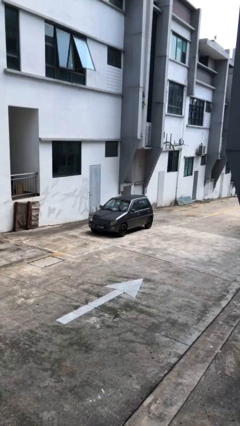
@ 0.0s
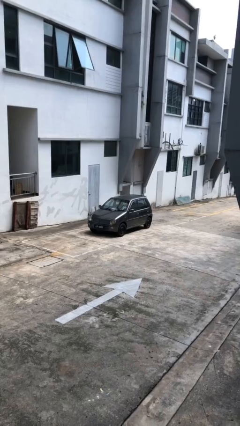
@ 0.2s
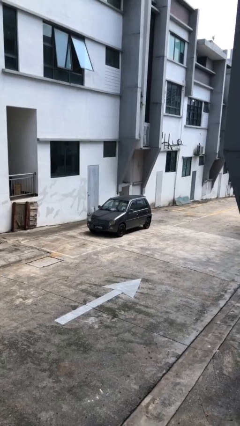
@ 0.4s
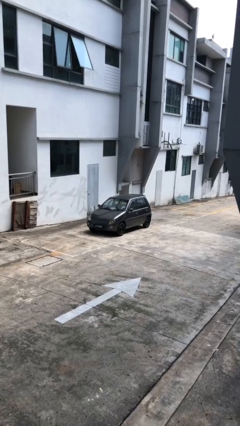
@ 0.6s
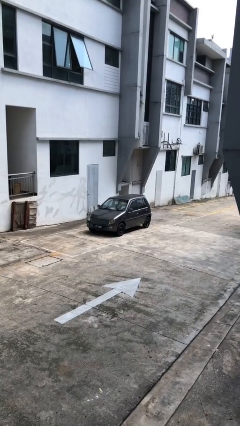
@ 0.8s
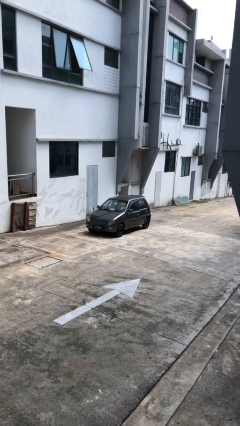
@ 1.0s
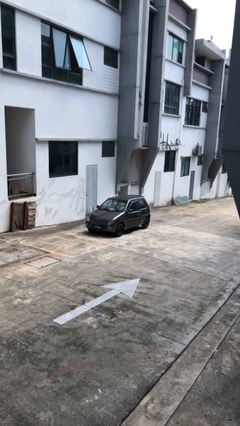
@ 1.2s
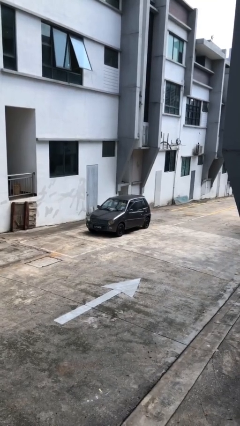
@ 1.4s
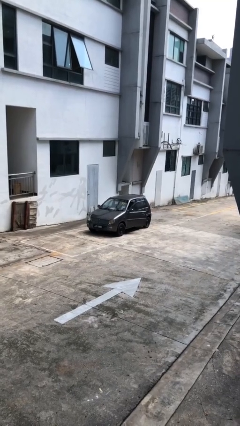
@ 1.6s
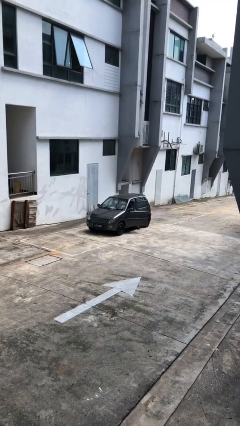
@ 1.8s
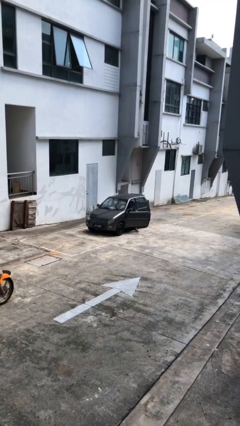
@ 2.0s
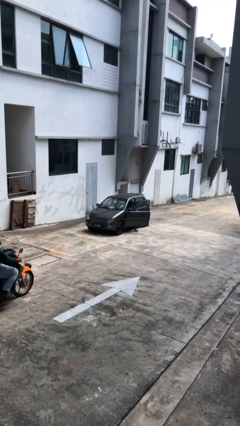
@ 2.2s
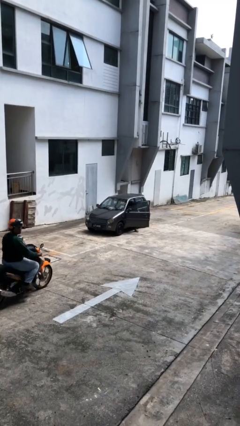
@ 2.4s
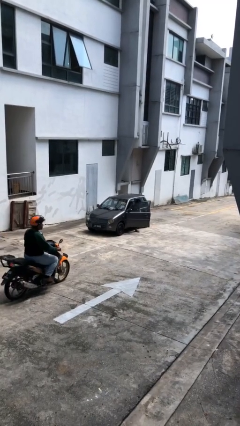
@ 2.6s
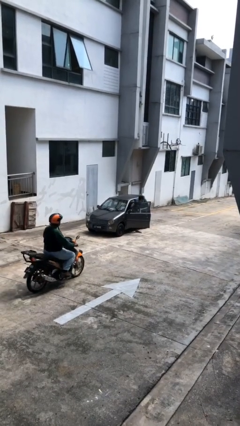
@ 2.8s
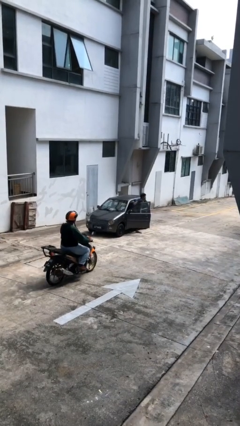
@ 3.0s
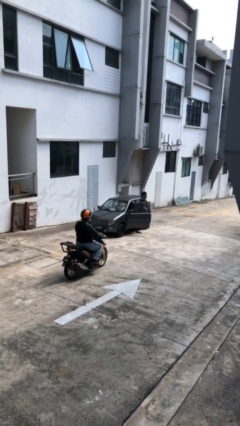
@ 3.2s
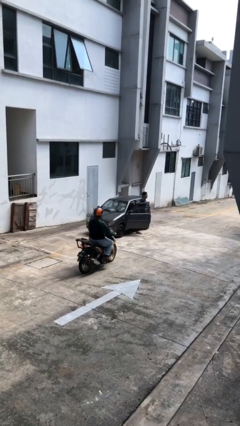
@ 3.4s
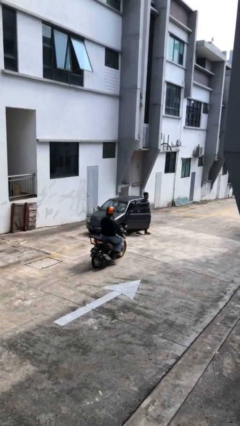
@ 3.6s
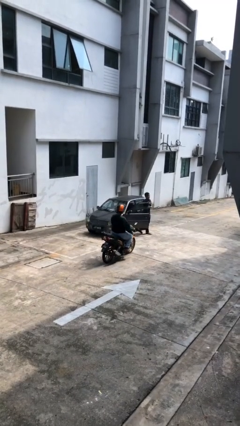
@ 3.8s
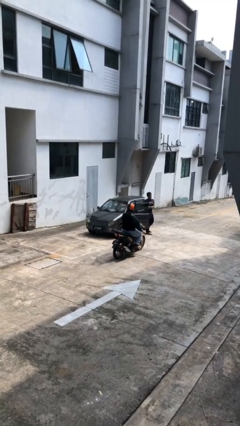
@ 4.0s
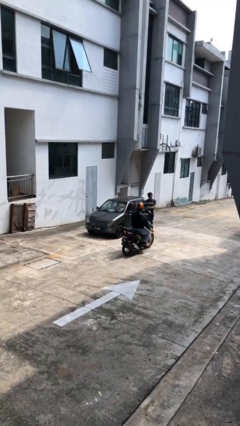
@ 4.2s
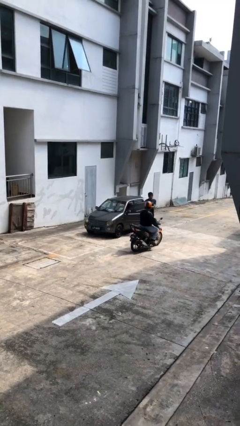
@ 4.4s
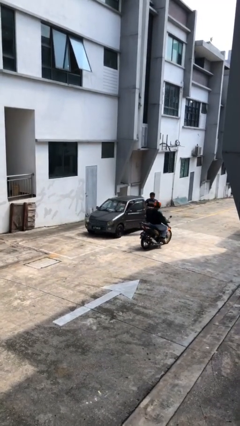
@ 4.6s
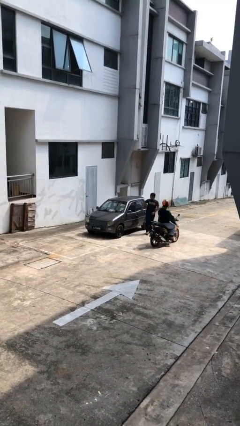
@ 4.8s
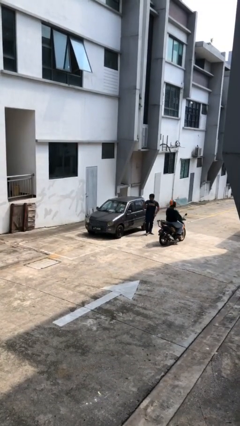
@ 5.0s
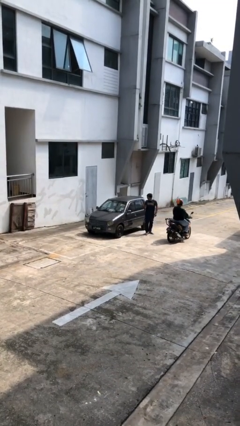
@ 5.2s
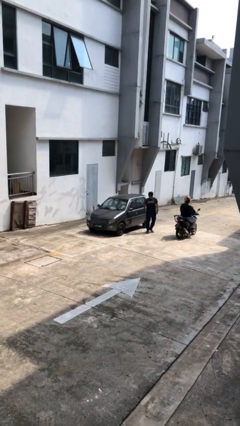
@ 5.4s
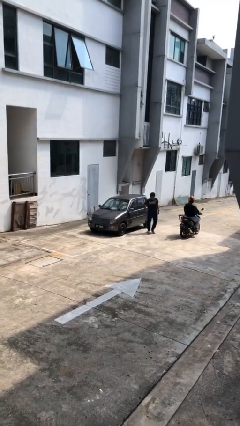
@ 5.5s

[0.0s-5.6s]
car drops off person

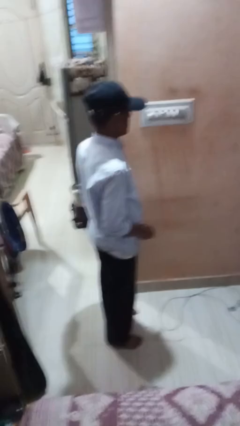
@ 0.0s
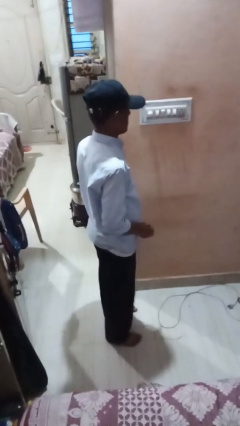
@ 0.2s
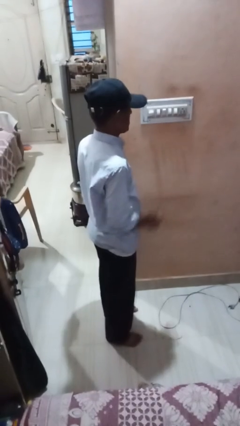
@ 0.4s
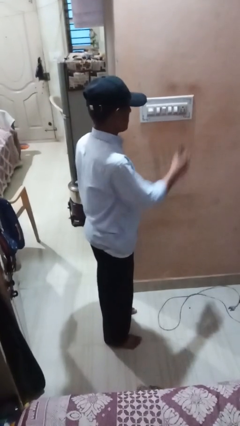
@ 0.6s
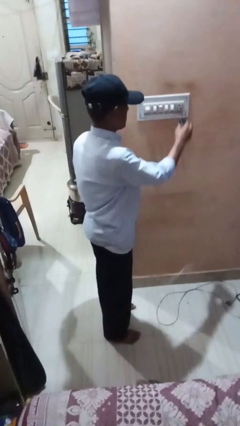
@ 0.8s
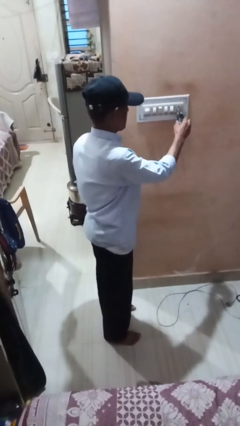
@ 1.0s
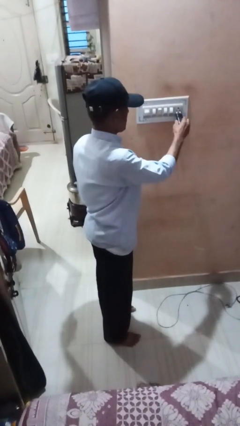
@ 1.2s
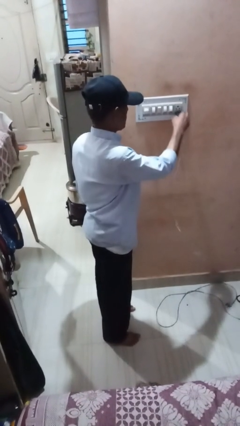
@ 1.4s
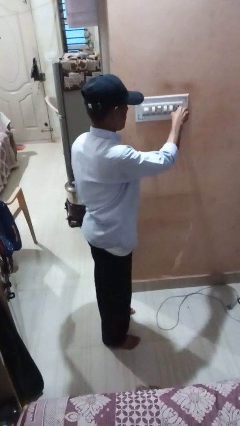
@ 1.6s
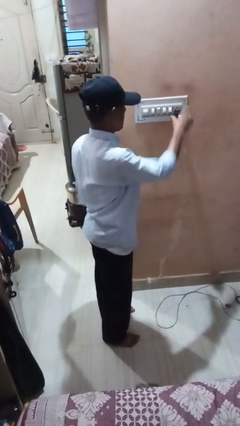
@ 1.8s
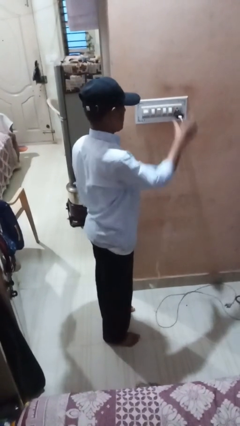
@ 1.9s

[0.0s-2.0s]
person plugs into electrical socket

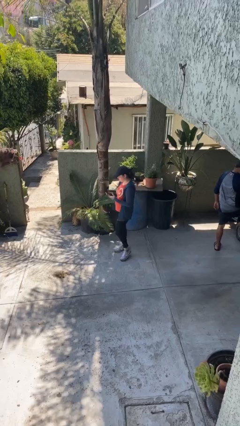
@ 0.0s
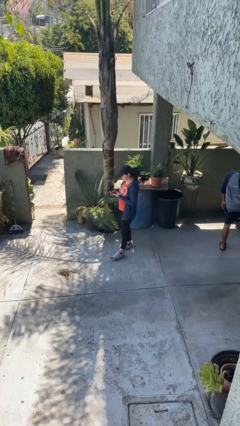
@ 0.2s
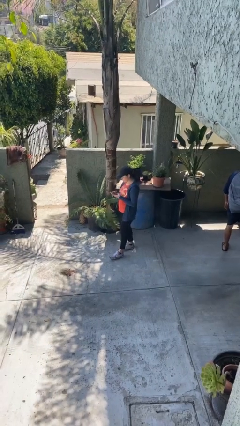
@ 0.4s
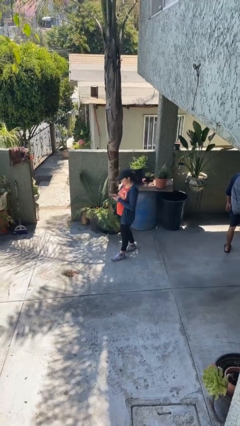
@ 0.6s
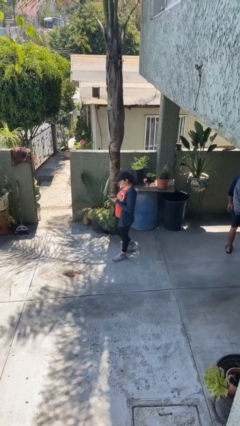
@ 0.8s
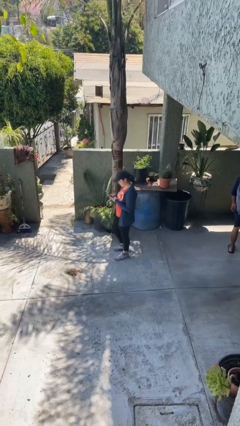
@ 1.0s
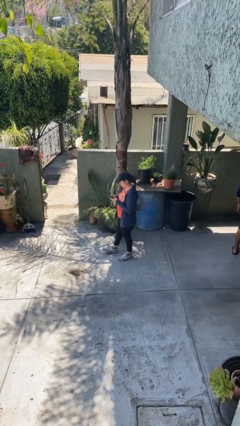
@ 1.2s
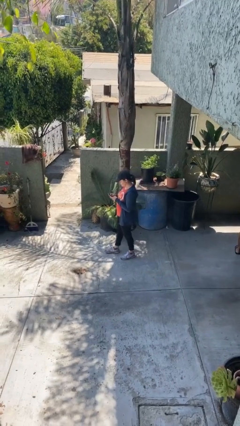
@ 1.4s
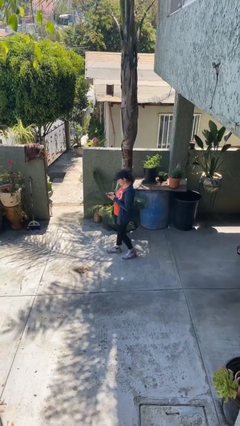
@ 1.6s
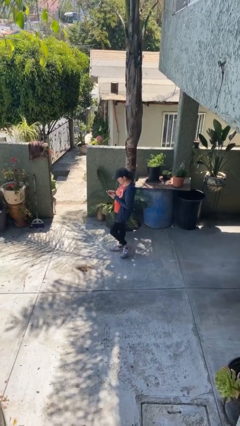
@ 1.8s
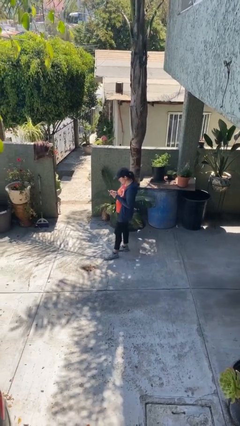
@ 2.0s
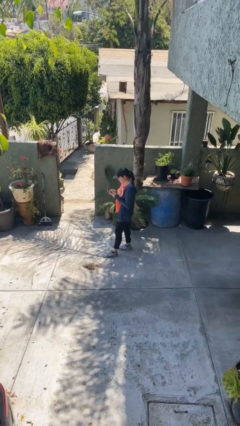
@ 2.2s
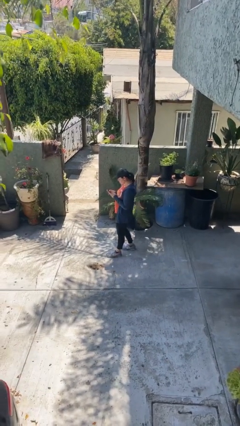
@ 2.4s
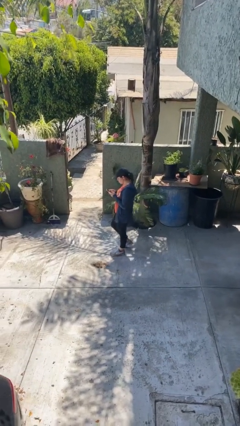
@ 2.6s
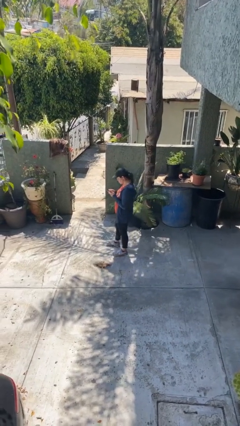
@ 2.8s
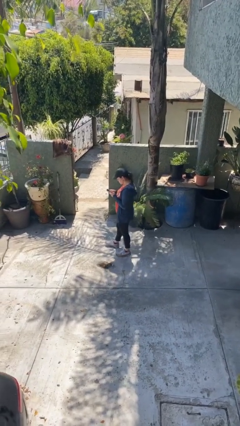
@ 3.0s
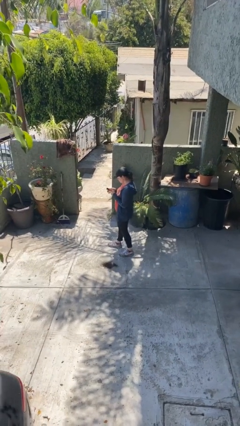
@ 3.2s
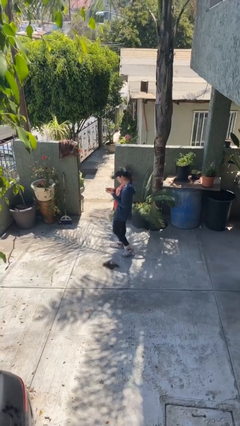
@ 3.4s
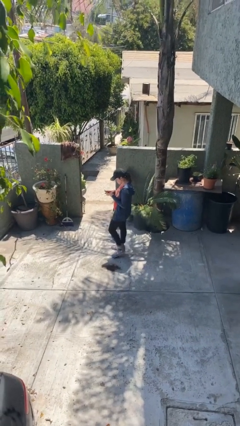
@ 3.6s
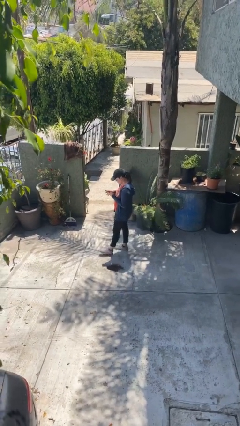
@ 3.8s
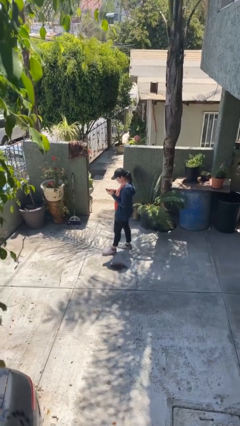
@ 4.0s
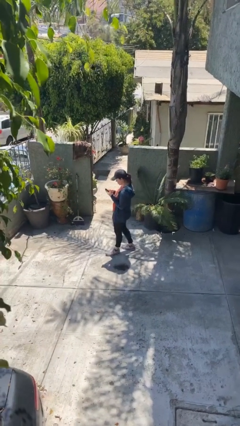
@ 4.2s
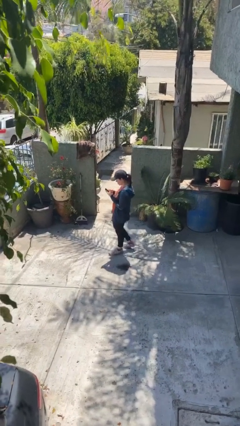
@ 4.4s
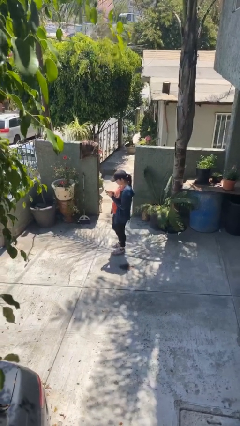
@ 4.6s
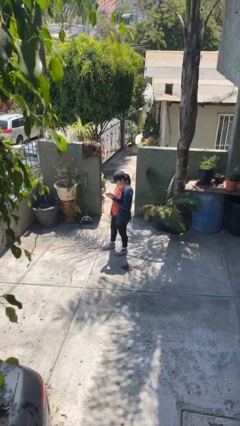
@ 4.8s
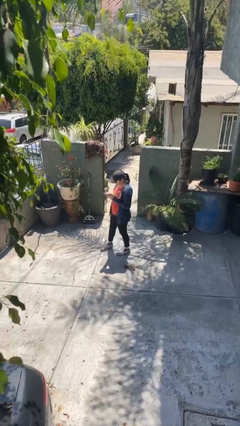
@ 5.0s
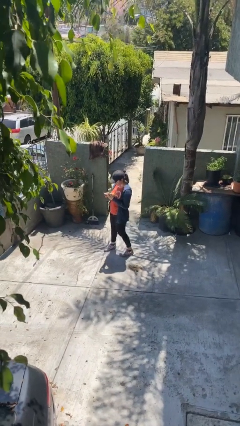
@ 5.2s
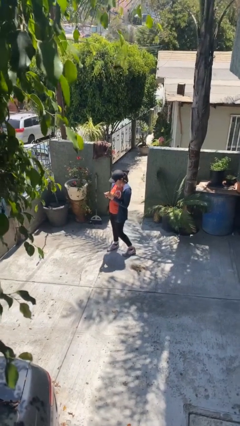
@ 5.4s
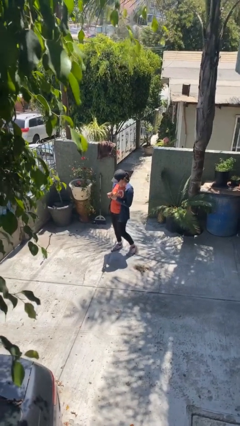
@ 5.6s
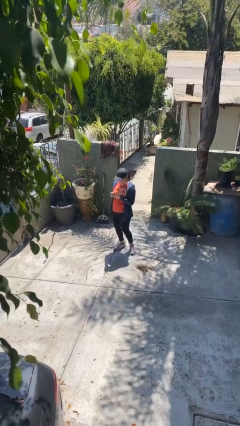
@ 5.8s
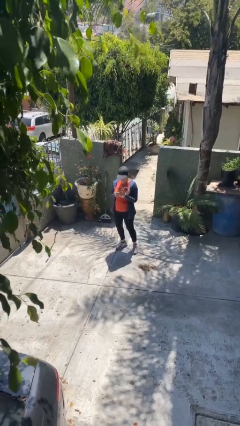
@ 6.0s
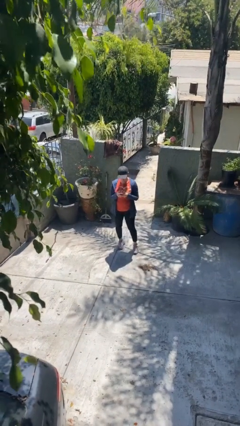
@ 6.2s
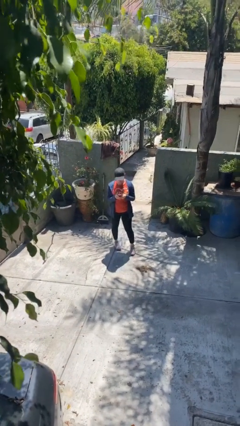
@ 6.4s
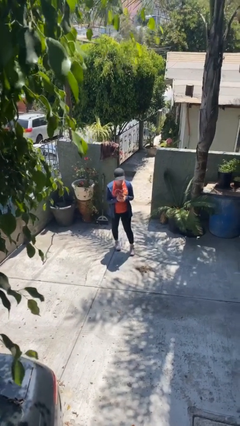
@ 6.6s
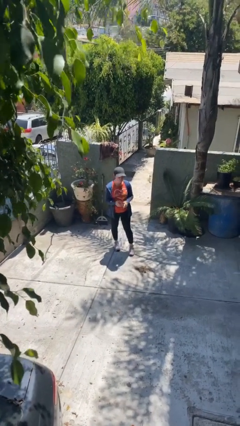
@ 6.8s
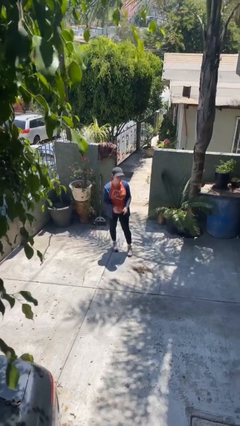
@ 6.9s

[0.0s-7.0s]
person texts on phone

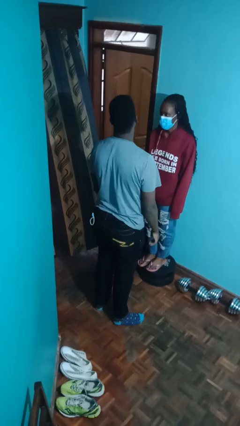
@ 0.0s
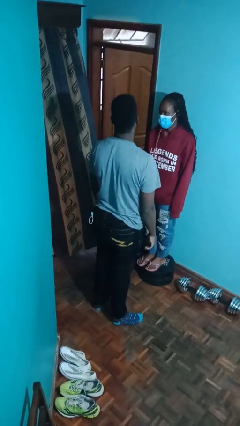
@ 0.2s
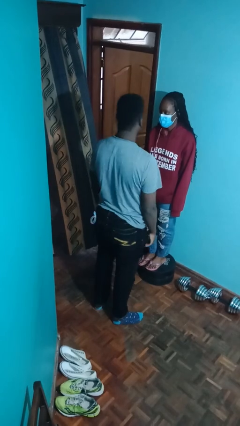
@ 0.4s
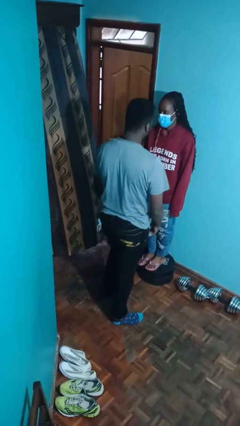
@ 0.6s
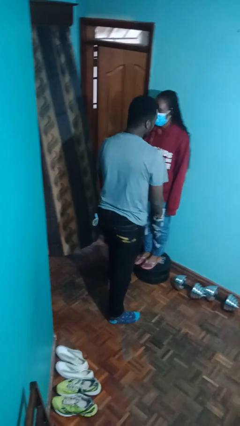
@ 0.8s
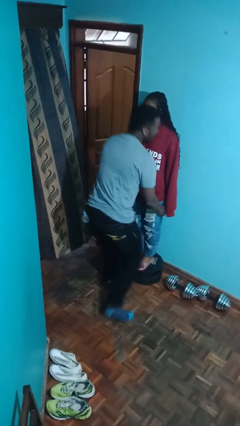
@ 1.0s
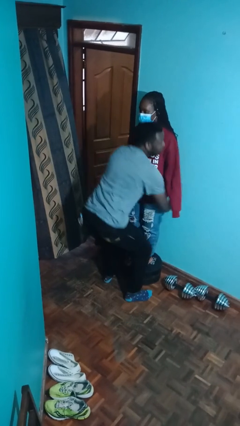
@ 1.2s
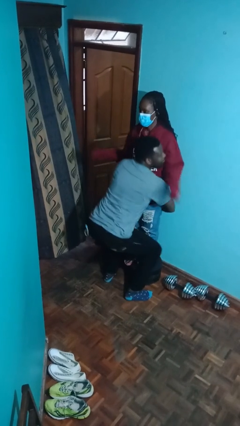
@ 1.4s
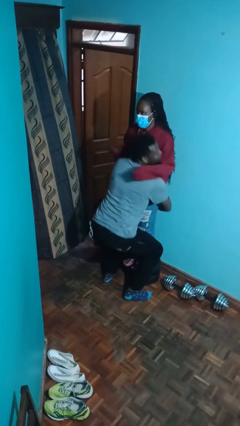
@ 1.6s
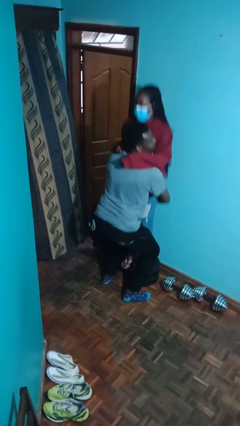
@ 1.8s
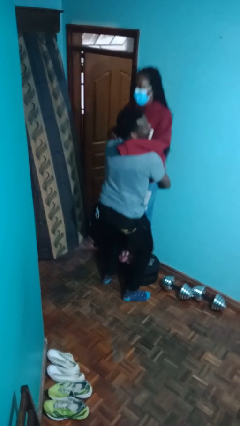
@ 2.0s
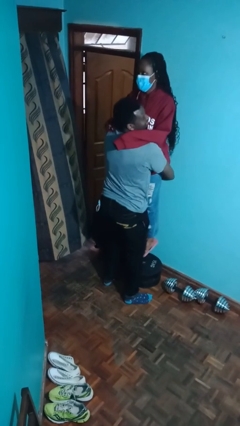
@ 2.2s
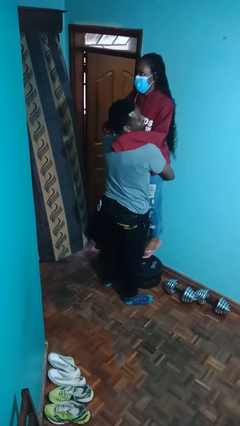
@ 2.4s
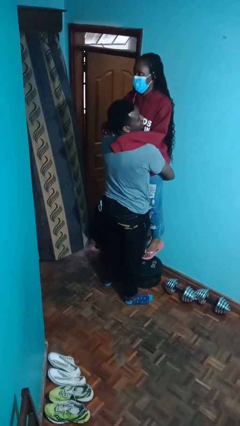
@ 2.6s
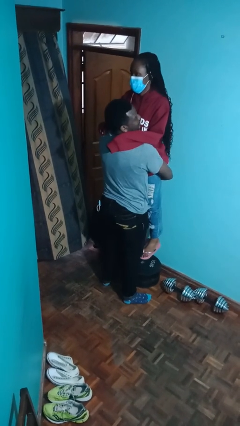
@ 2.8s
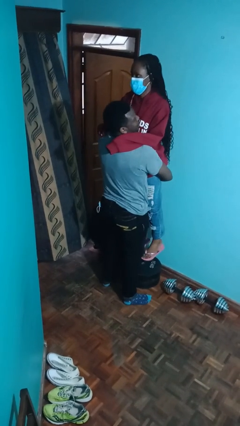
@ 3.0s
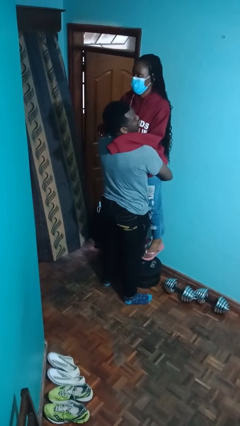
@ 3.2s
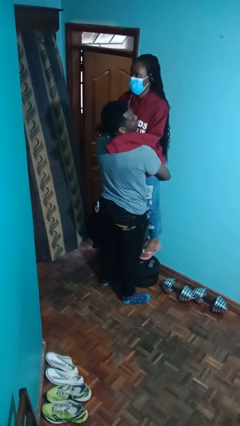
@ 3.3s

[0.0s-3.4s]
person picks up person

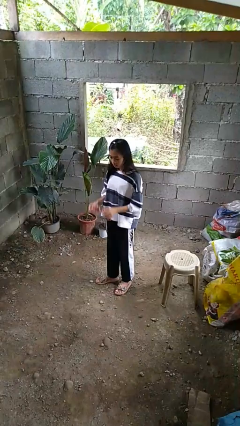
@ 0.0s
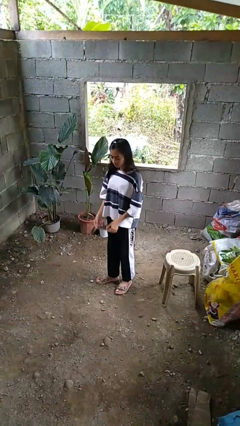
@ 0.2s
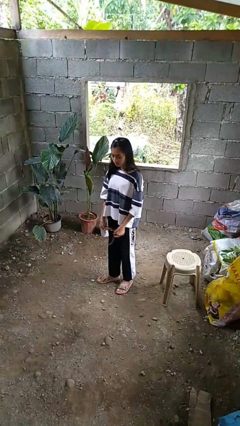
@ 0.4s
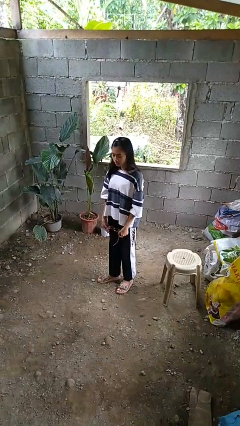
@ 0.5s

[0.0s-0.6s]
person takes off sunglasses
